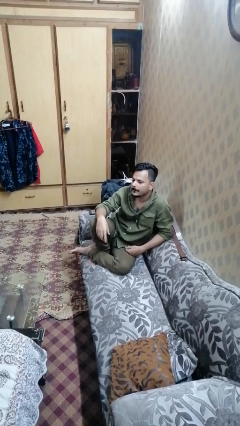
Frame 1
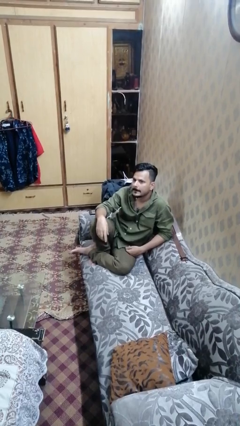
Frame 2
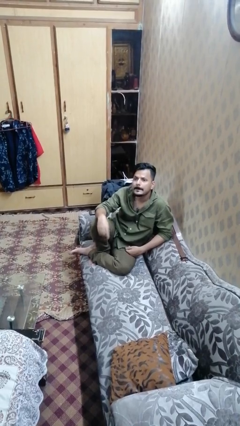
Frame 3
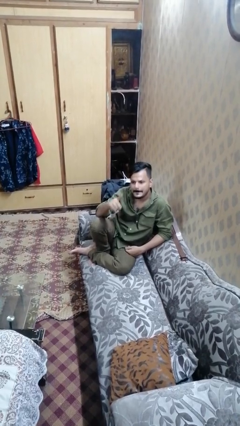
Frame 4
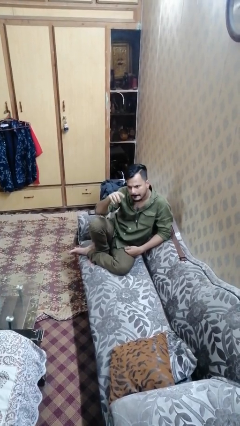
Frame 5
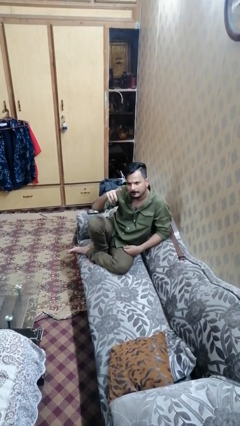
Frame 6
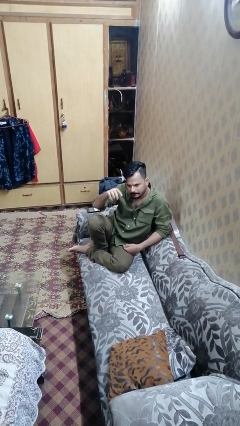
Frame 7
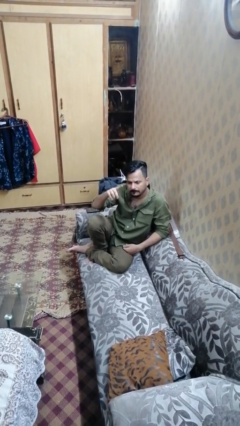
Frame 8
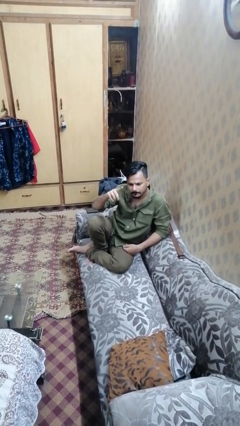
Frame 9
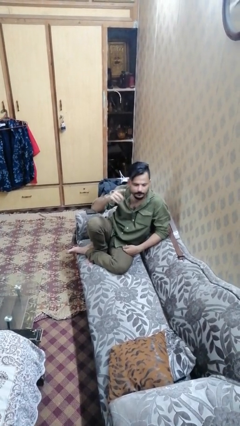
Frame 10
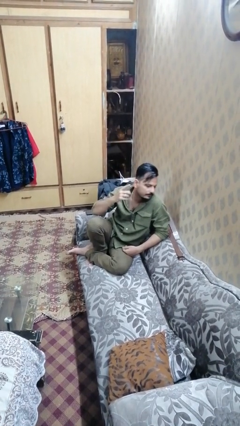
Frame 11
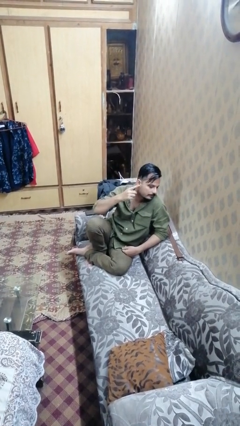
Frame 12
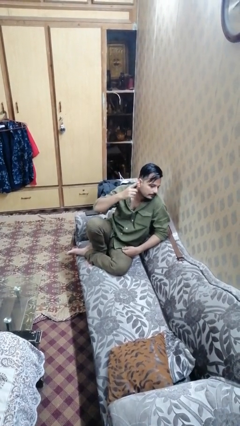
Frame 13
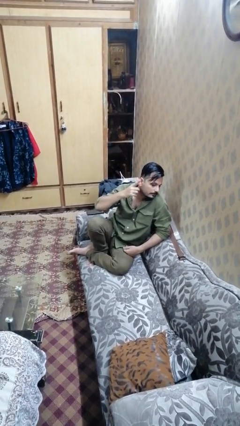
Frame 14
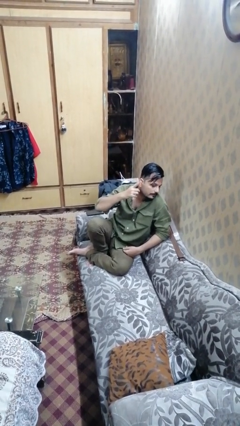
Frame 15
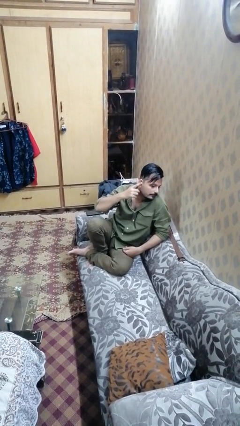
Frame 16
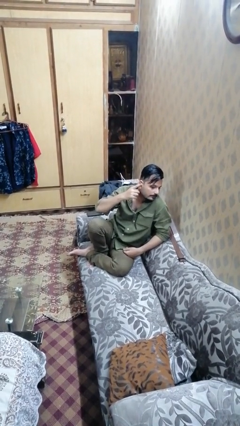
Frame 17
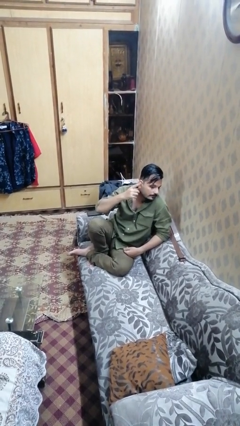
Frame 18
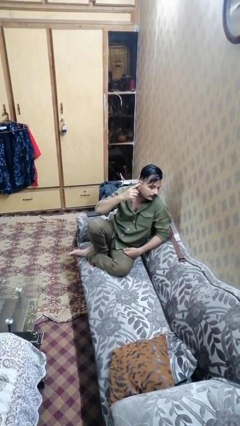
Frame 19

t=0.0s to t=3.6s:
person gestures listen closely

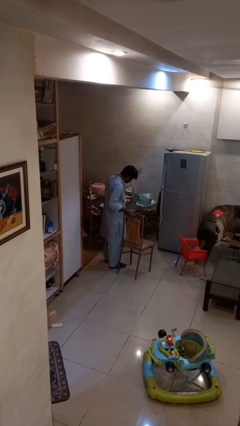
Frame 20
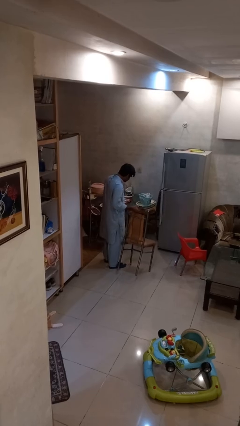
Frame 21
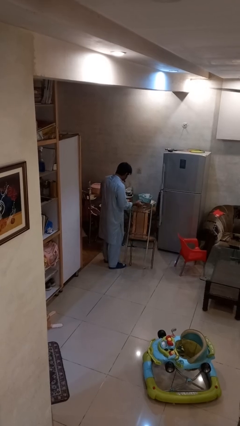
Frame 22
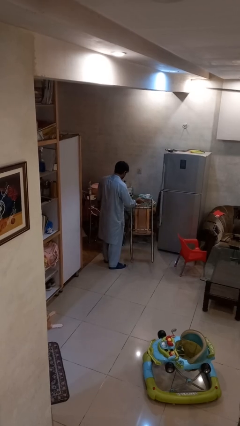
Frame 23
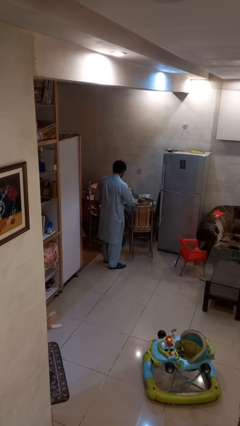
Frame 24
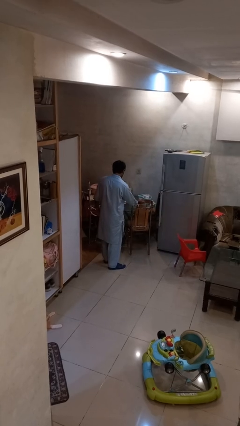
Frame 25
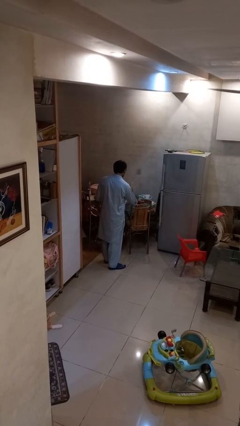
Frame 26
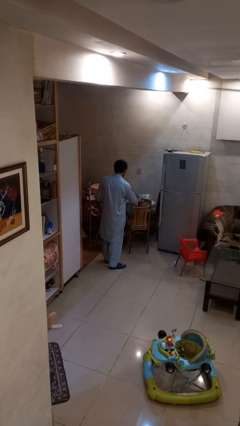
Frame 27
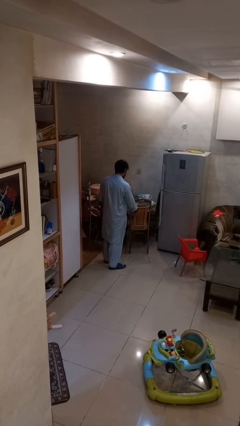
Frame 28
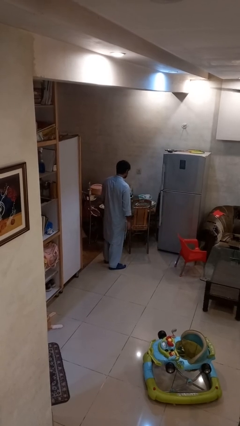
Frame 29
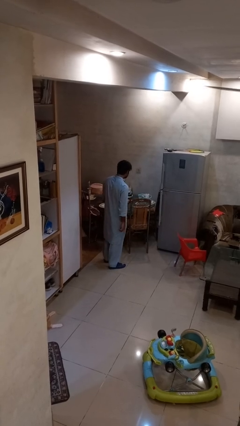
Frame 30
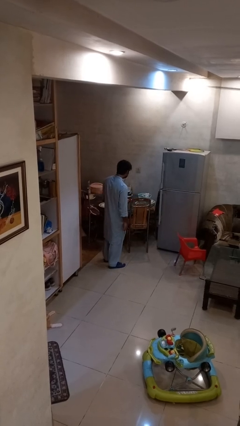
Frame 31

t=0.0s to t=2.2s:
person pushes in chair

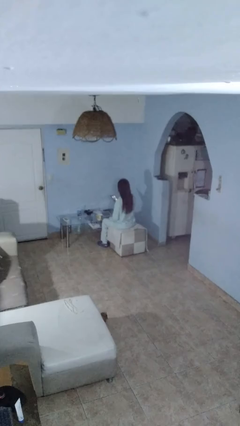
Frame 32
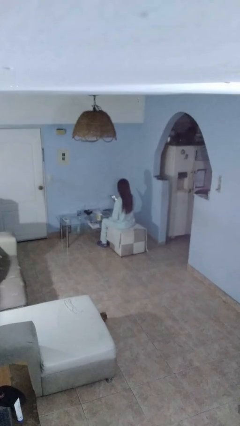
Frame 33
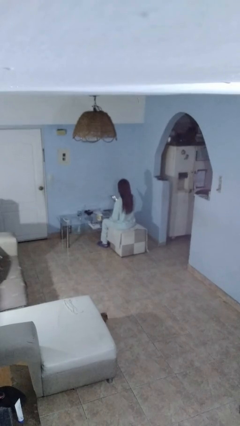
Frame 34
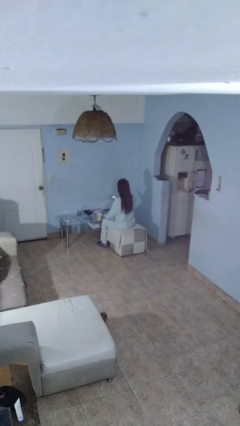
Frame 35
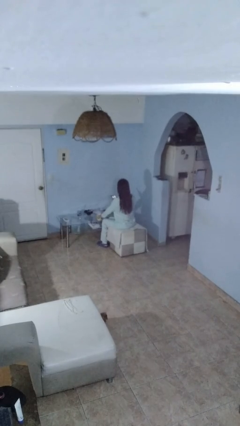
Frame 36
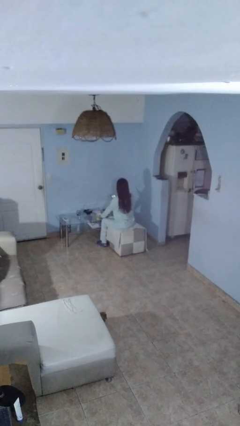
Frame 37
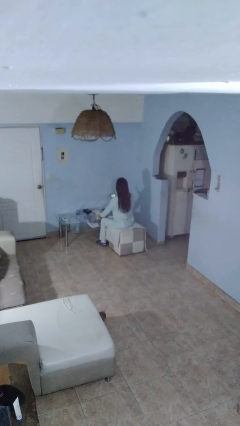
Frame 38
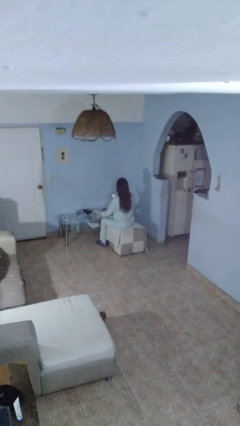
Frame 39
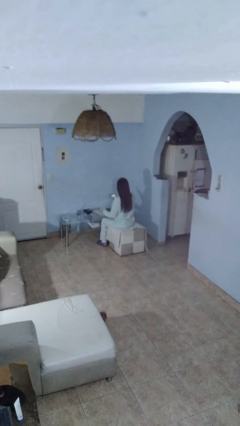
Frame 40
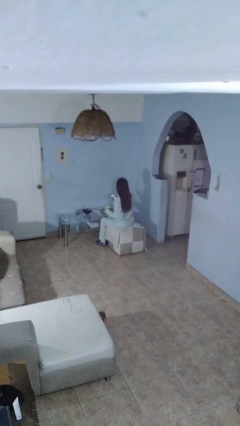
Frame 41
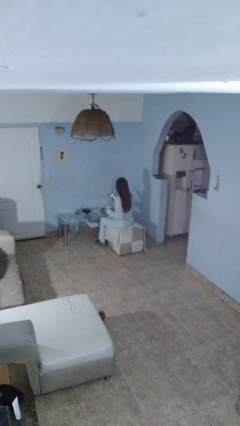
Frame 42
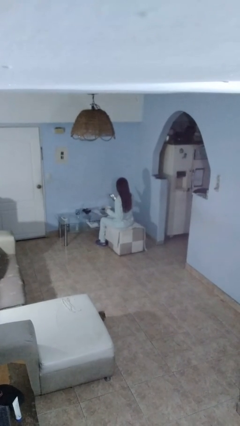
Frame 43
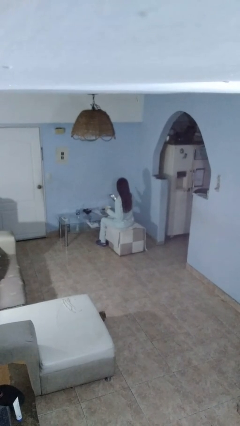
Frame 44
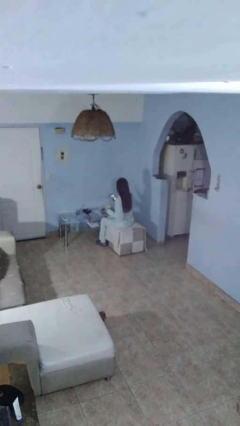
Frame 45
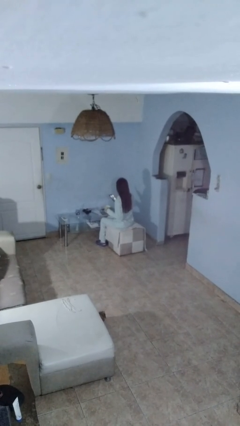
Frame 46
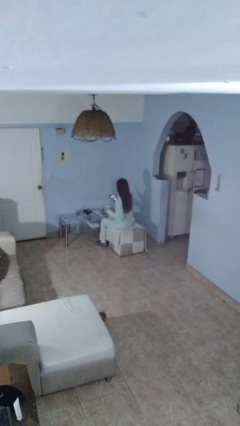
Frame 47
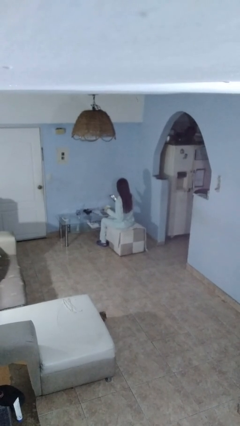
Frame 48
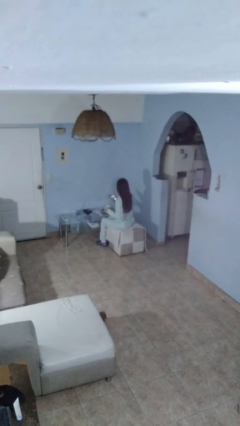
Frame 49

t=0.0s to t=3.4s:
person picks up object from table

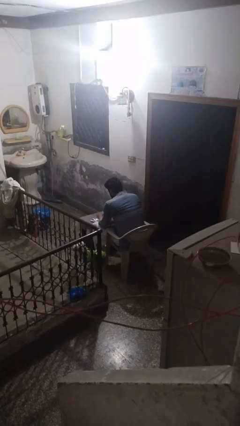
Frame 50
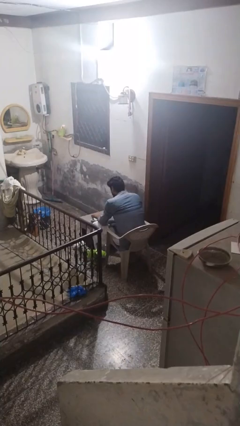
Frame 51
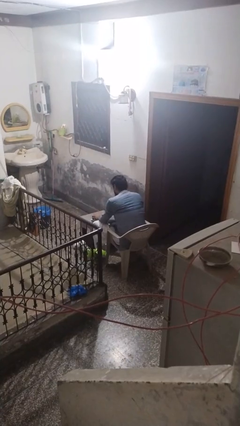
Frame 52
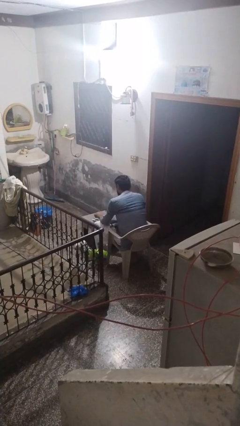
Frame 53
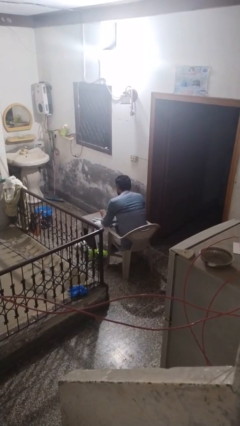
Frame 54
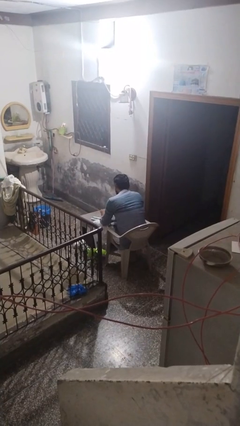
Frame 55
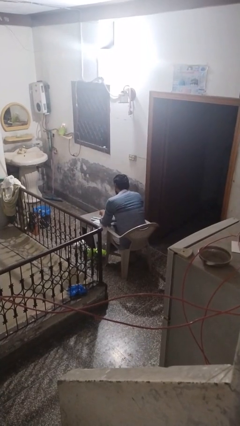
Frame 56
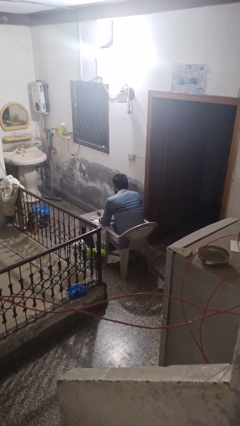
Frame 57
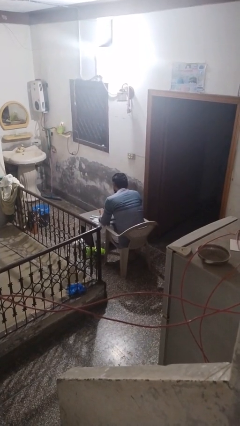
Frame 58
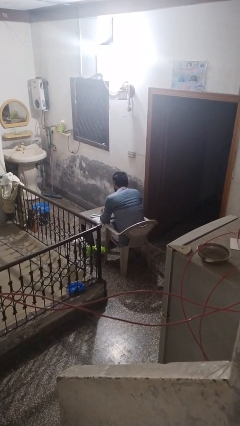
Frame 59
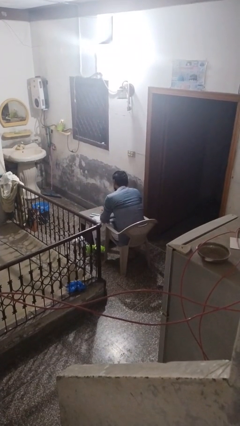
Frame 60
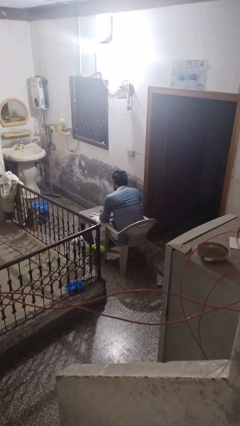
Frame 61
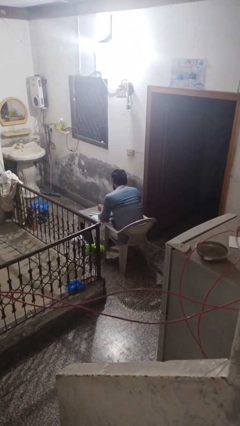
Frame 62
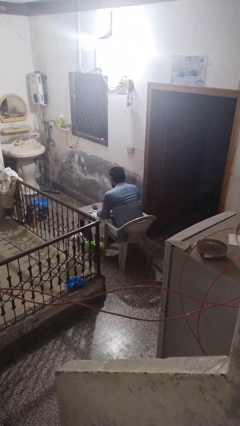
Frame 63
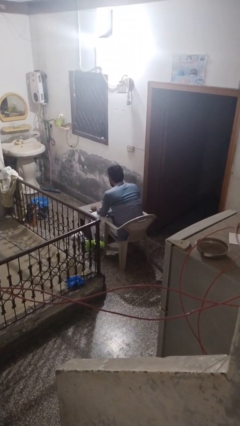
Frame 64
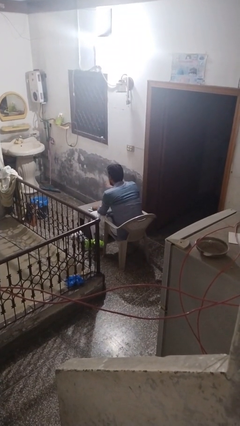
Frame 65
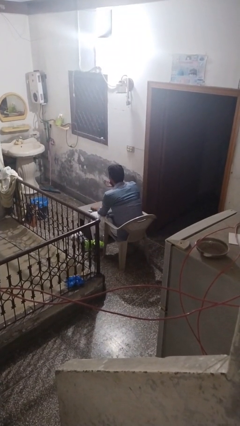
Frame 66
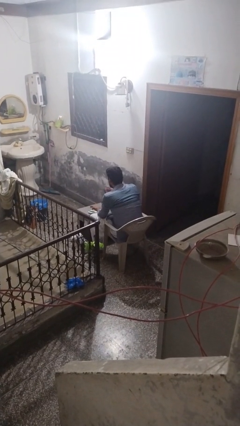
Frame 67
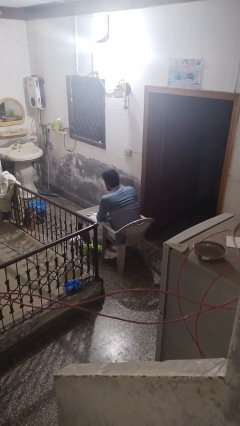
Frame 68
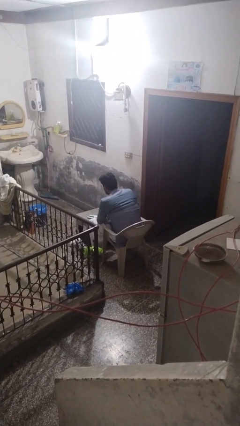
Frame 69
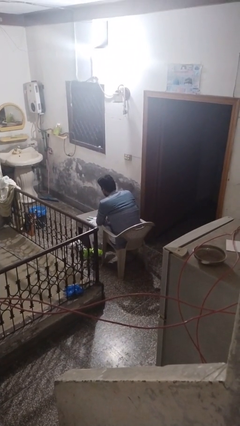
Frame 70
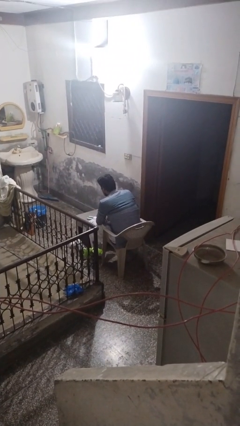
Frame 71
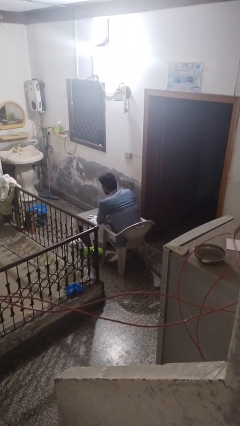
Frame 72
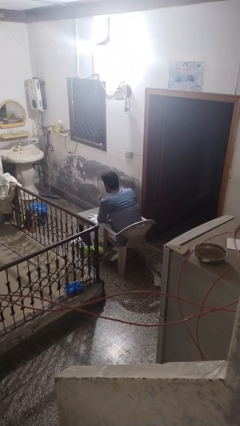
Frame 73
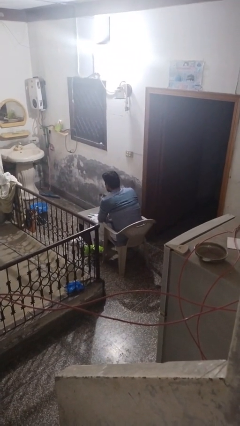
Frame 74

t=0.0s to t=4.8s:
person takes medicine pills

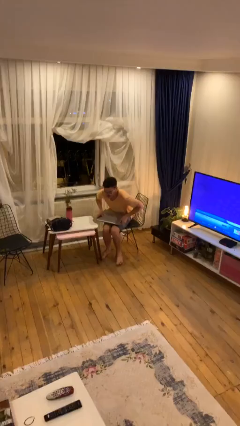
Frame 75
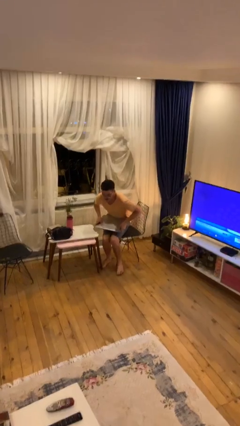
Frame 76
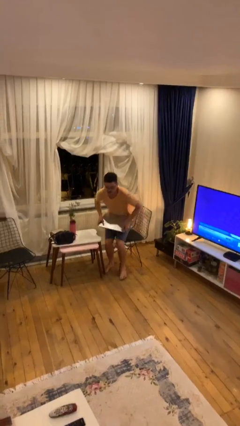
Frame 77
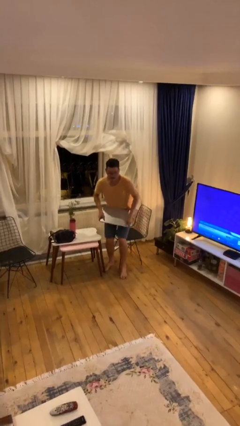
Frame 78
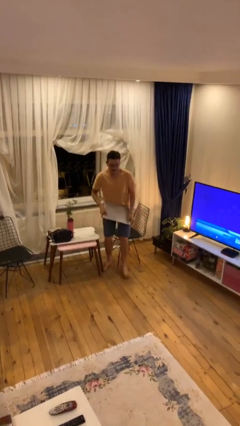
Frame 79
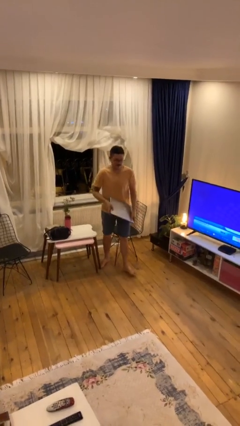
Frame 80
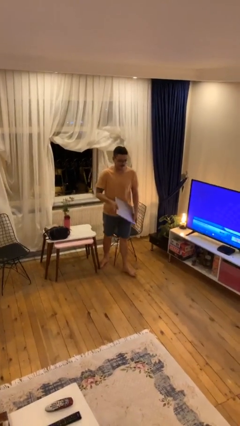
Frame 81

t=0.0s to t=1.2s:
person stands up

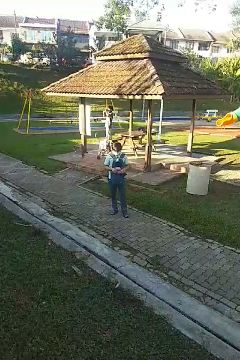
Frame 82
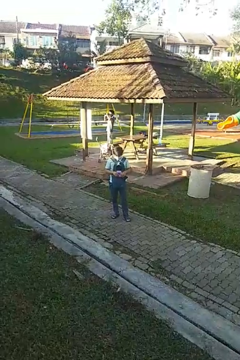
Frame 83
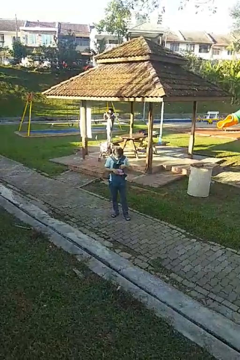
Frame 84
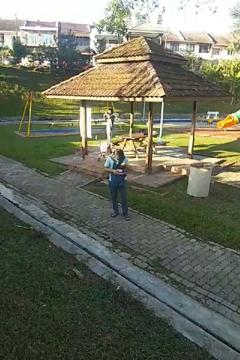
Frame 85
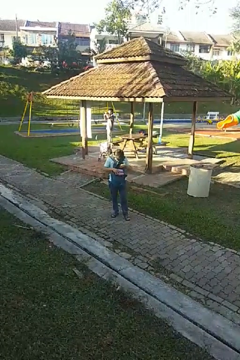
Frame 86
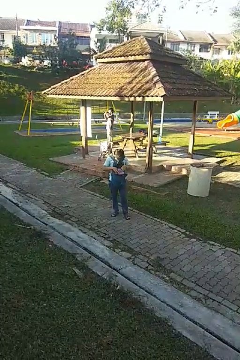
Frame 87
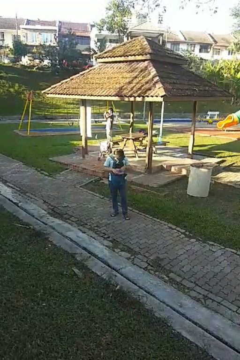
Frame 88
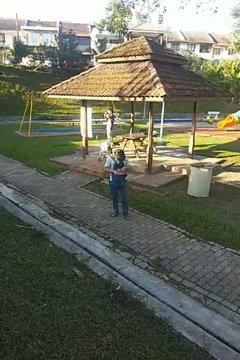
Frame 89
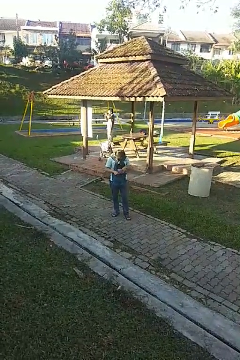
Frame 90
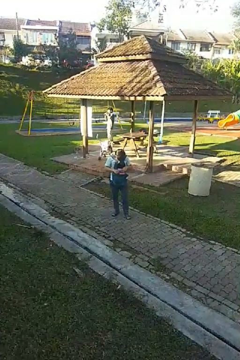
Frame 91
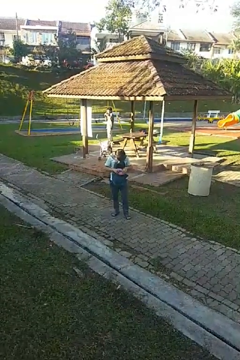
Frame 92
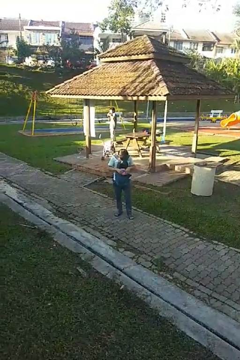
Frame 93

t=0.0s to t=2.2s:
person searches in backpack

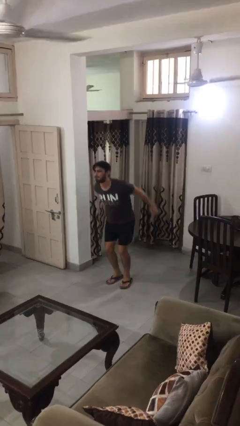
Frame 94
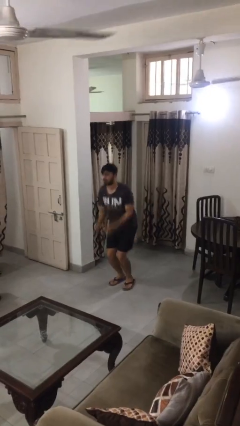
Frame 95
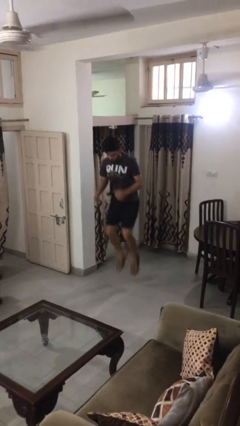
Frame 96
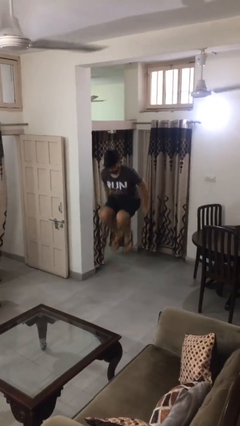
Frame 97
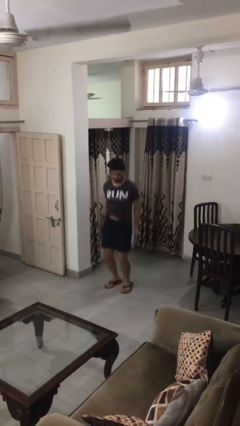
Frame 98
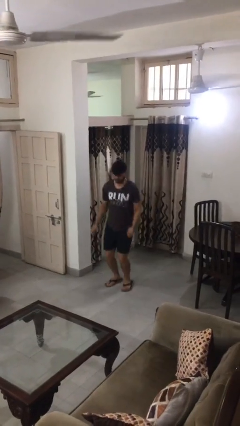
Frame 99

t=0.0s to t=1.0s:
person jumps
